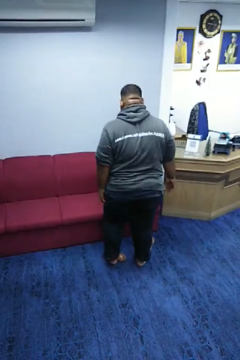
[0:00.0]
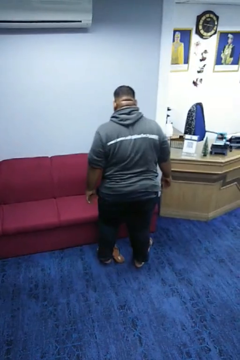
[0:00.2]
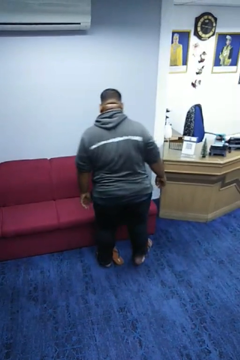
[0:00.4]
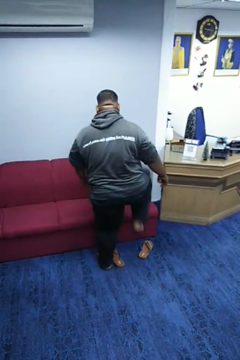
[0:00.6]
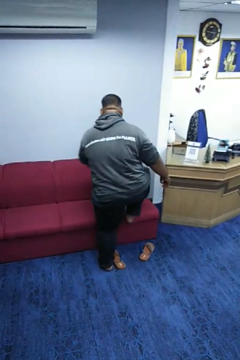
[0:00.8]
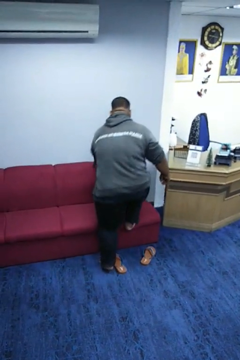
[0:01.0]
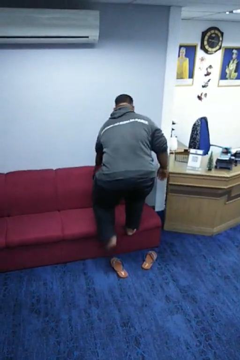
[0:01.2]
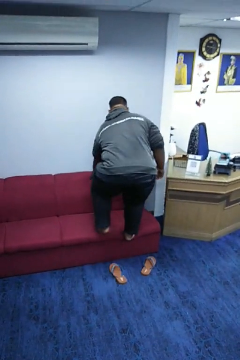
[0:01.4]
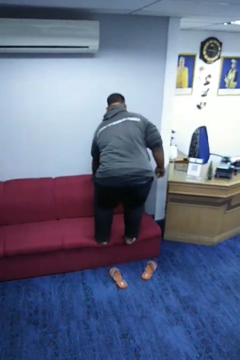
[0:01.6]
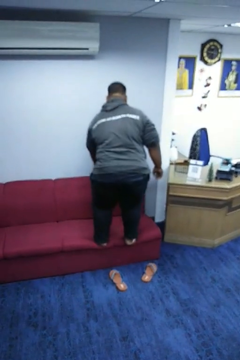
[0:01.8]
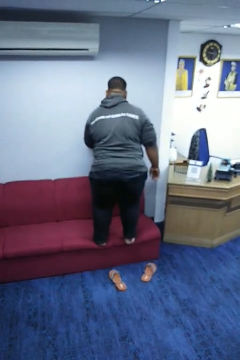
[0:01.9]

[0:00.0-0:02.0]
person climbs on couch

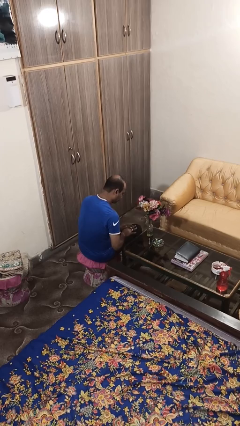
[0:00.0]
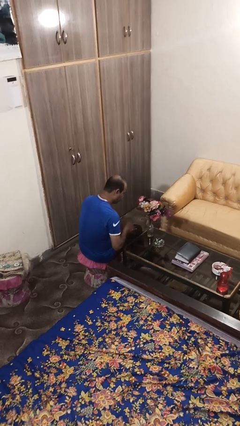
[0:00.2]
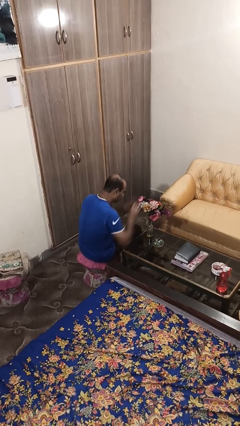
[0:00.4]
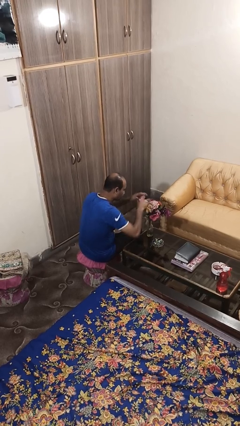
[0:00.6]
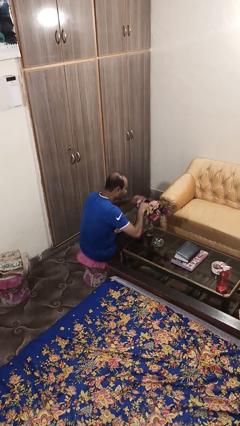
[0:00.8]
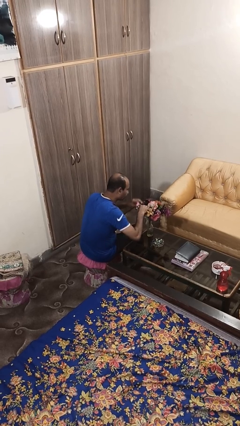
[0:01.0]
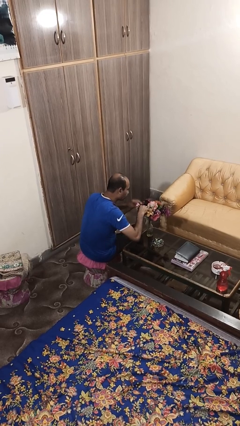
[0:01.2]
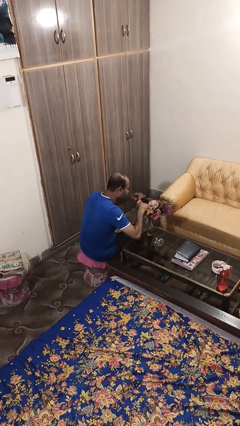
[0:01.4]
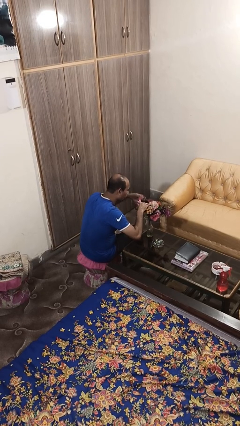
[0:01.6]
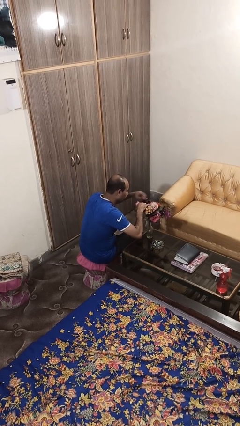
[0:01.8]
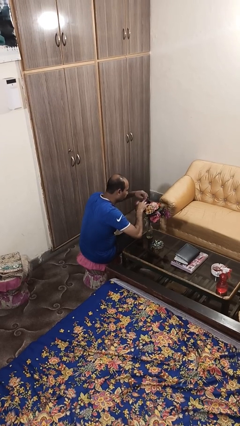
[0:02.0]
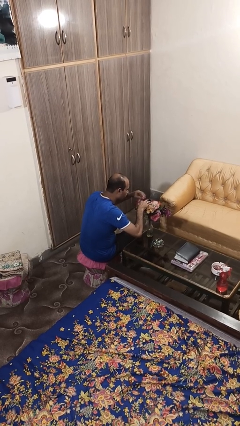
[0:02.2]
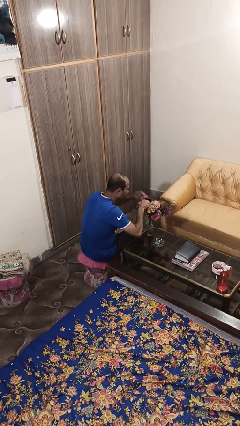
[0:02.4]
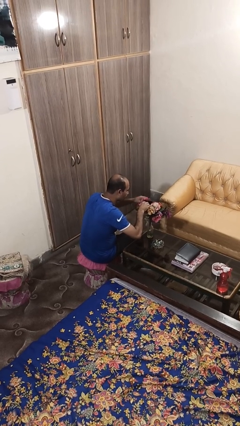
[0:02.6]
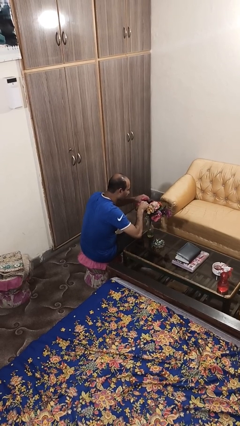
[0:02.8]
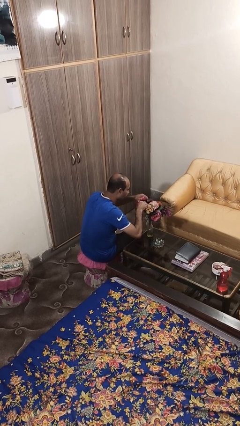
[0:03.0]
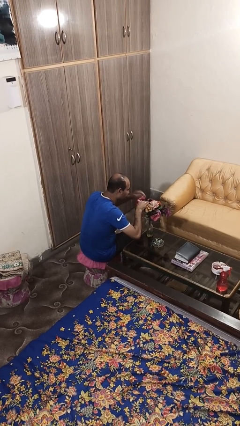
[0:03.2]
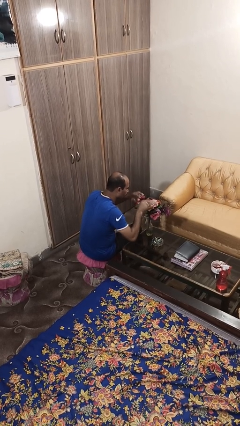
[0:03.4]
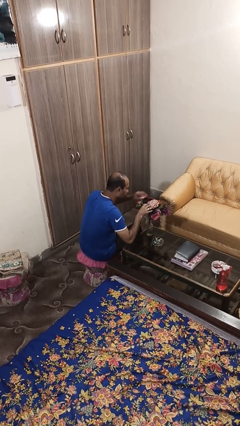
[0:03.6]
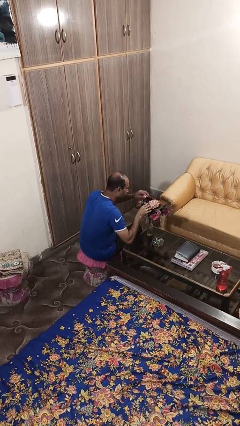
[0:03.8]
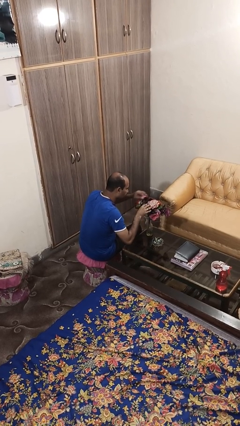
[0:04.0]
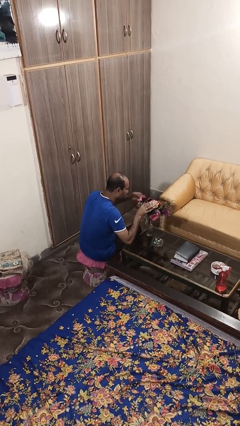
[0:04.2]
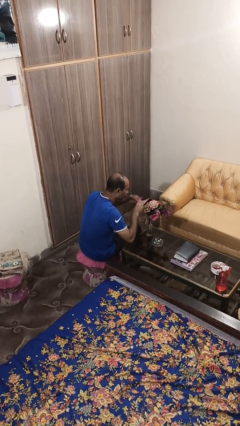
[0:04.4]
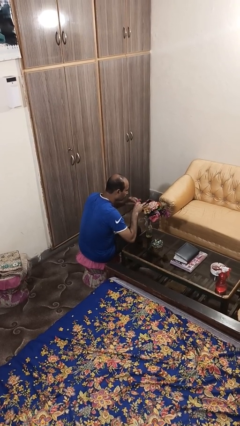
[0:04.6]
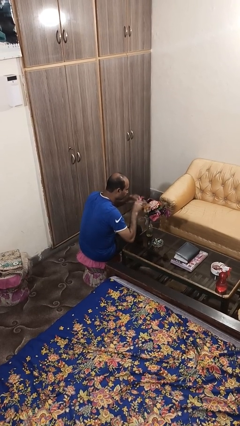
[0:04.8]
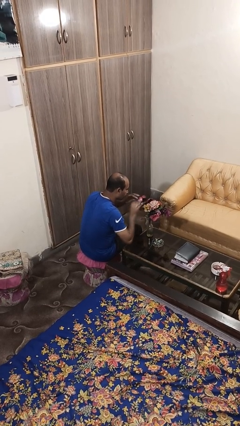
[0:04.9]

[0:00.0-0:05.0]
person arranges flowers in vase

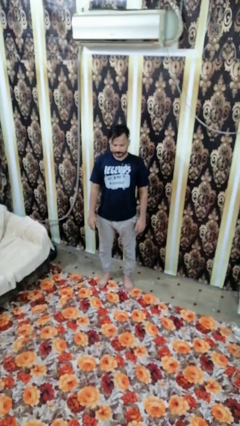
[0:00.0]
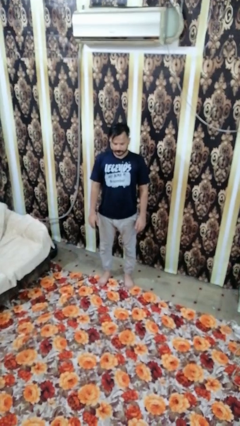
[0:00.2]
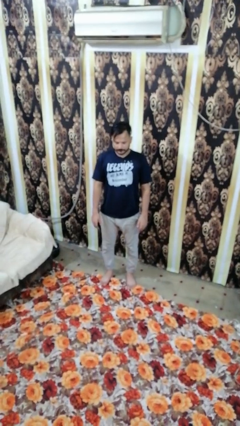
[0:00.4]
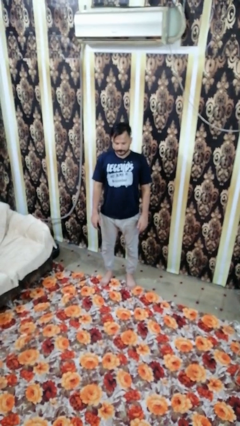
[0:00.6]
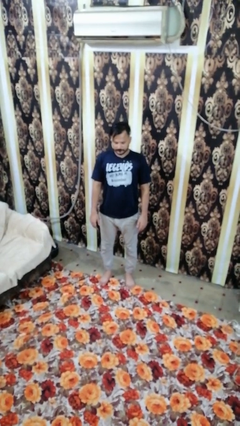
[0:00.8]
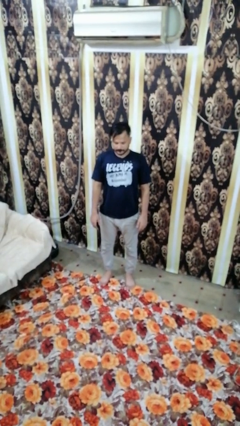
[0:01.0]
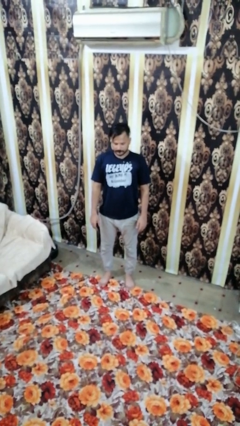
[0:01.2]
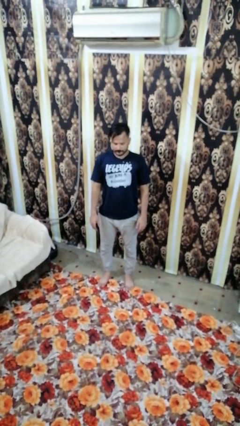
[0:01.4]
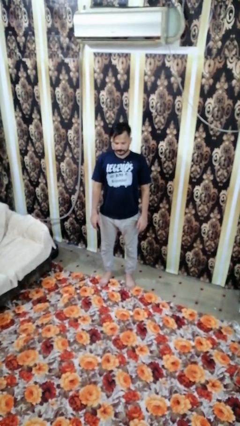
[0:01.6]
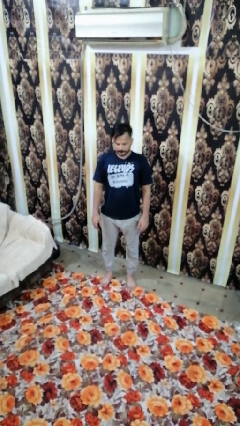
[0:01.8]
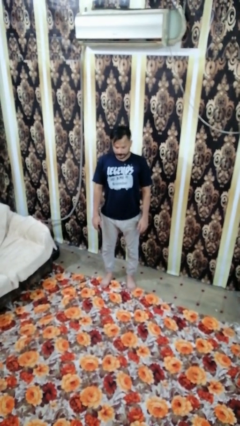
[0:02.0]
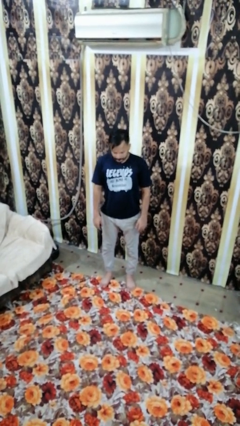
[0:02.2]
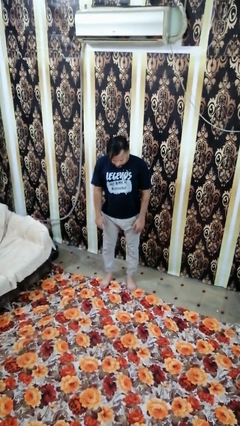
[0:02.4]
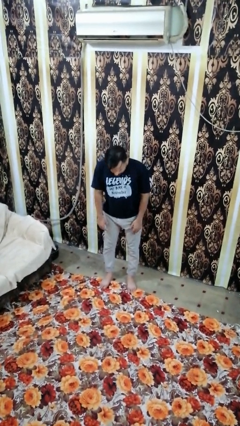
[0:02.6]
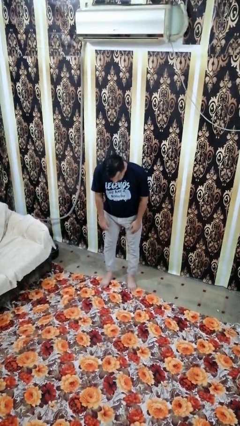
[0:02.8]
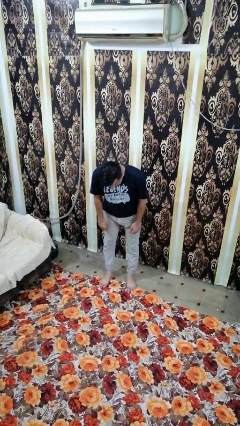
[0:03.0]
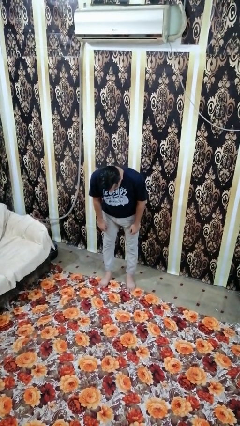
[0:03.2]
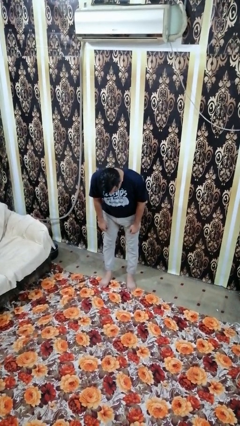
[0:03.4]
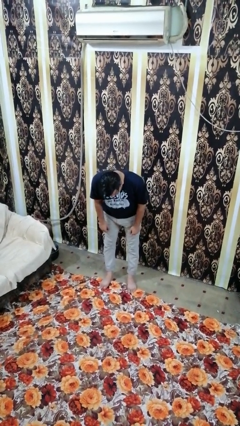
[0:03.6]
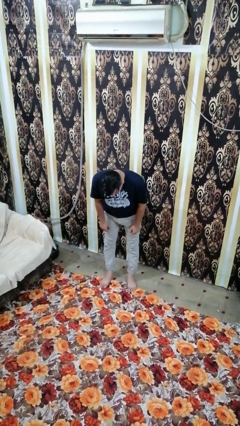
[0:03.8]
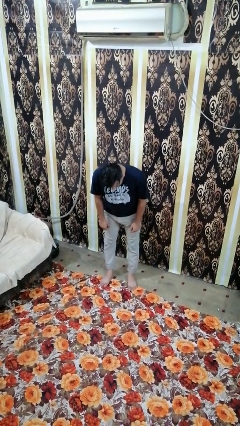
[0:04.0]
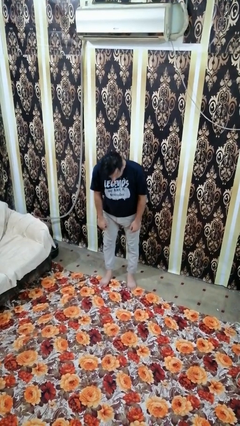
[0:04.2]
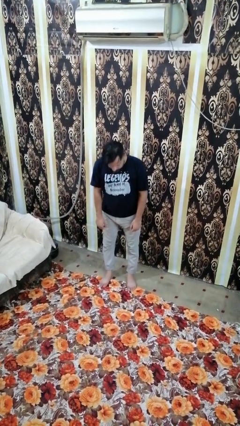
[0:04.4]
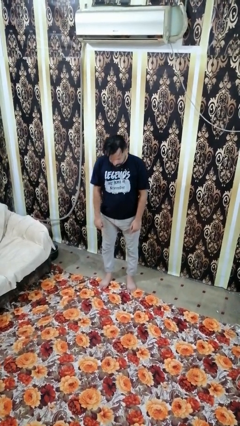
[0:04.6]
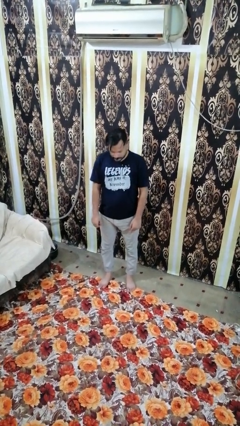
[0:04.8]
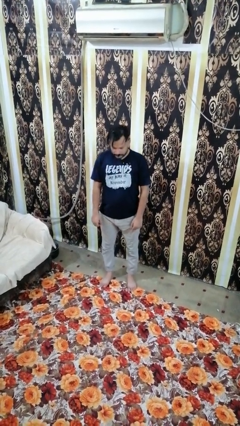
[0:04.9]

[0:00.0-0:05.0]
person bows

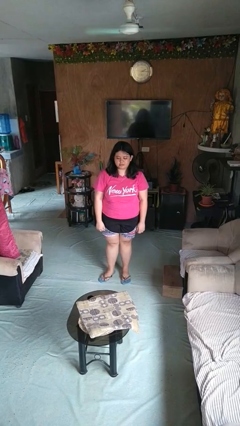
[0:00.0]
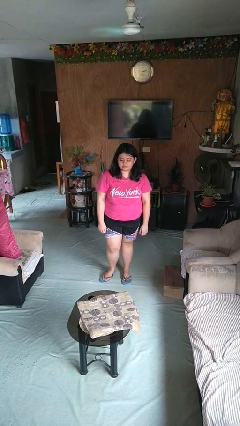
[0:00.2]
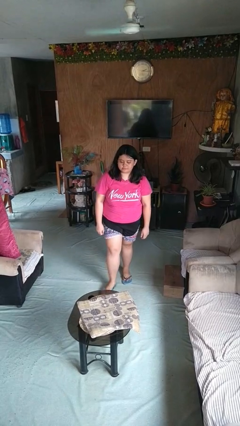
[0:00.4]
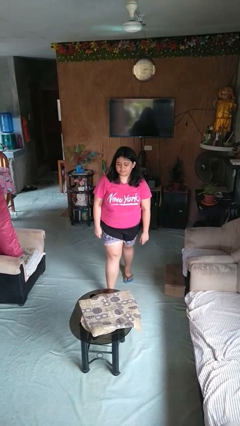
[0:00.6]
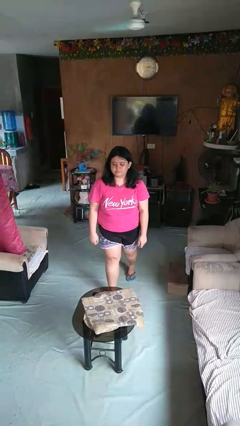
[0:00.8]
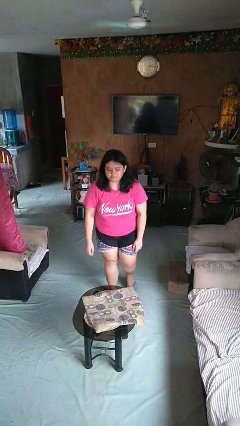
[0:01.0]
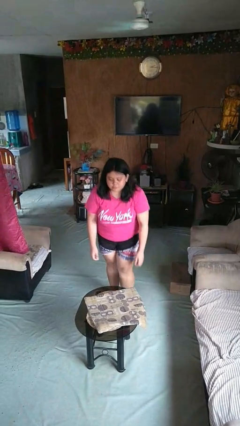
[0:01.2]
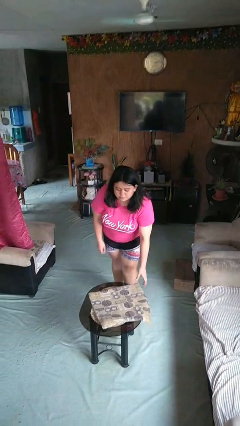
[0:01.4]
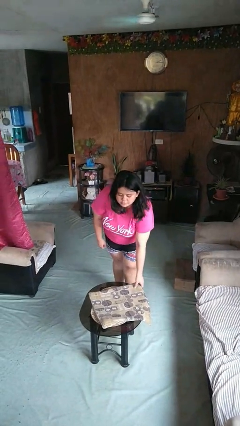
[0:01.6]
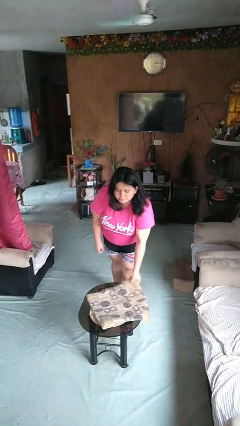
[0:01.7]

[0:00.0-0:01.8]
person picks up object from table

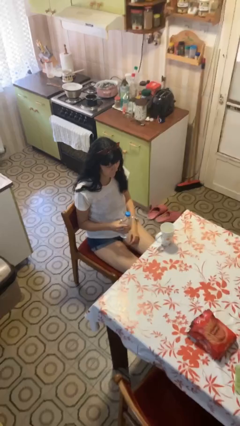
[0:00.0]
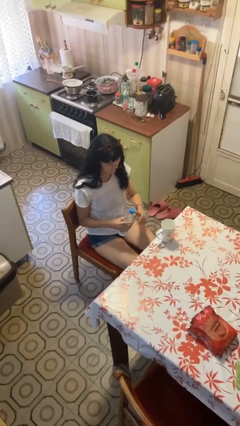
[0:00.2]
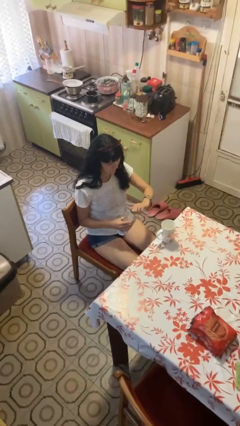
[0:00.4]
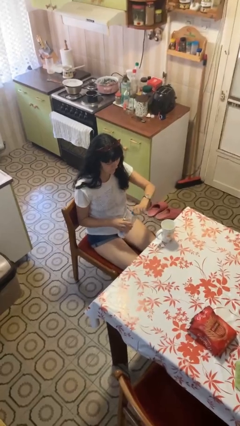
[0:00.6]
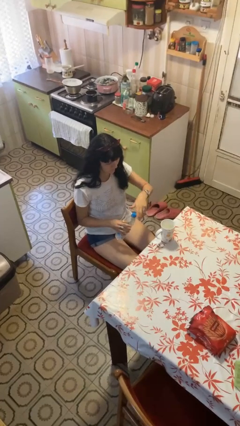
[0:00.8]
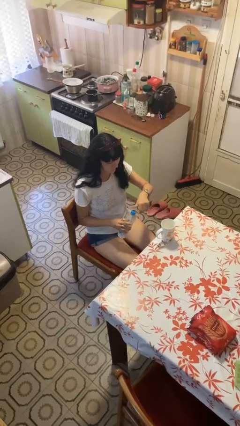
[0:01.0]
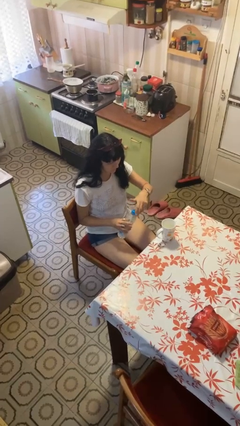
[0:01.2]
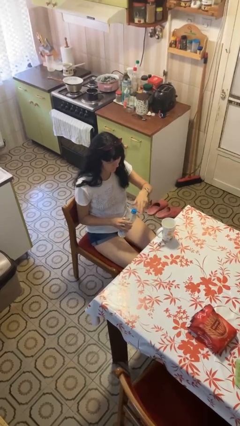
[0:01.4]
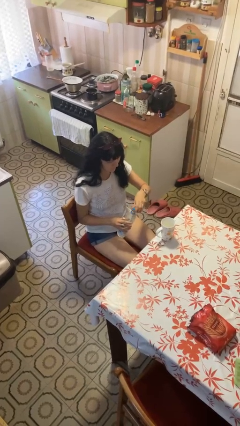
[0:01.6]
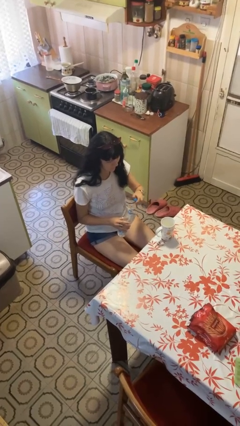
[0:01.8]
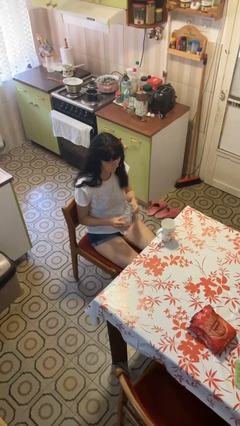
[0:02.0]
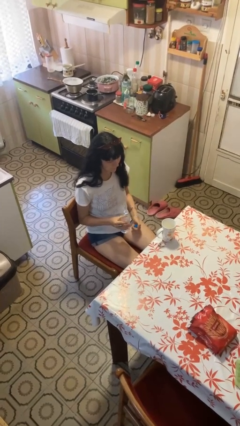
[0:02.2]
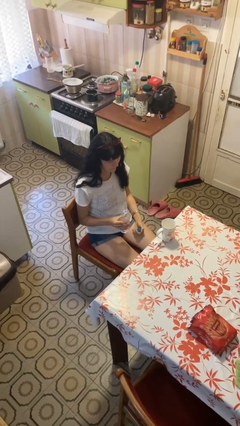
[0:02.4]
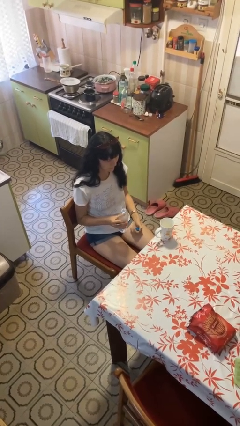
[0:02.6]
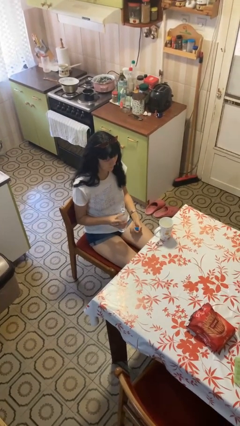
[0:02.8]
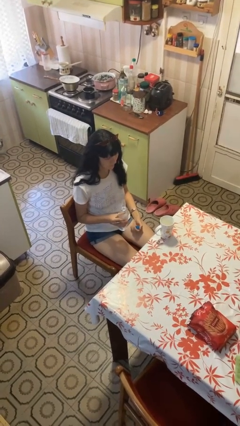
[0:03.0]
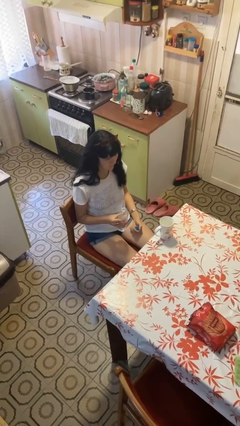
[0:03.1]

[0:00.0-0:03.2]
person unscrews lid from bottle

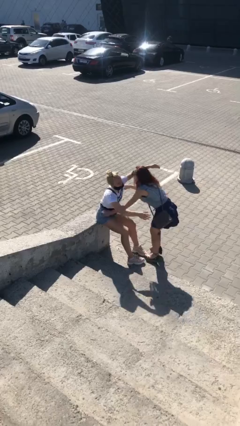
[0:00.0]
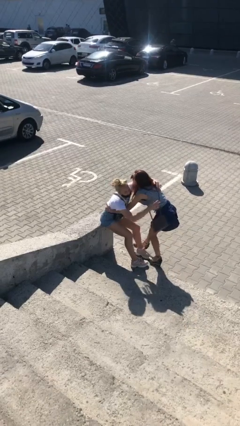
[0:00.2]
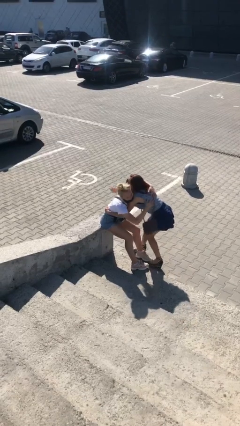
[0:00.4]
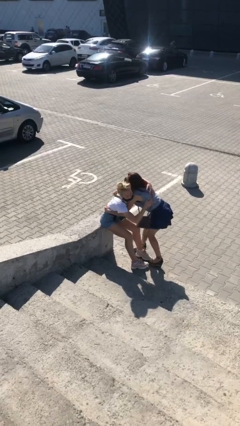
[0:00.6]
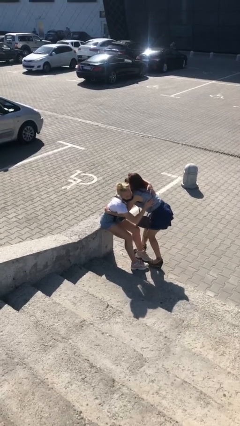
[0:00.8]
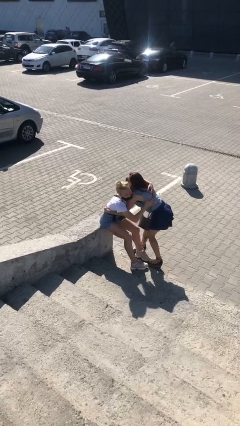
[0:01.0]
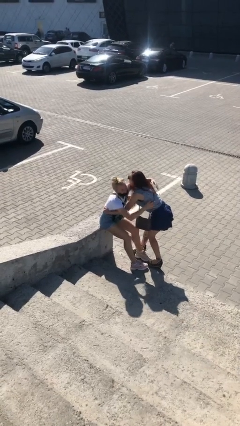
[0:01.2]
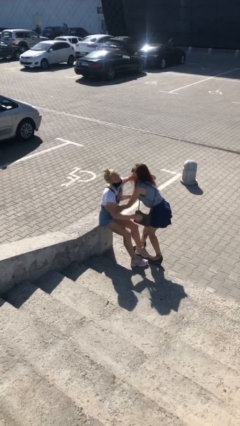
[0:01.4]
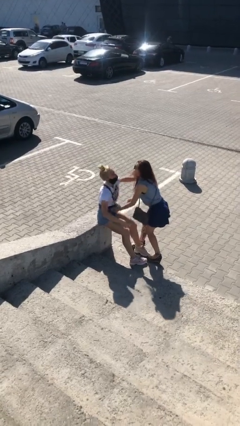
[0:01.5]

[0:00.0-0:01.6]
person embraces person
